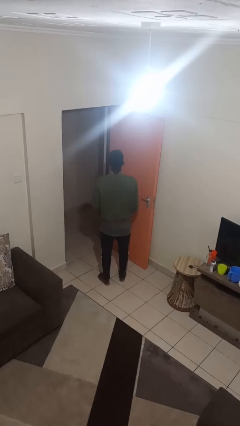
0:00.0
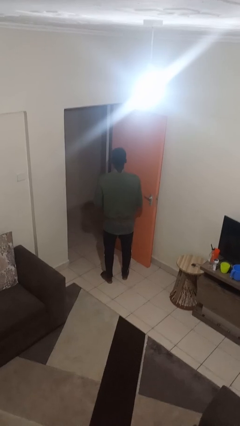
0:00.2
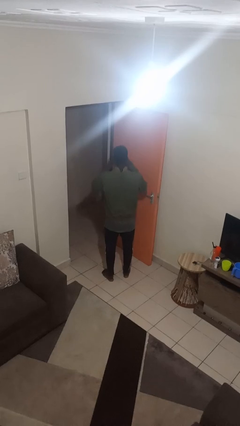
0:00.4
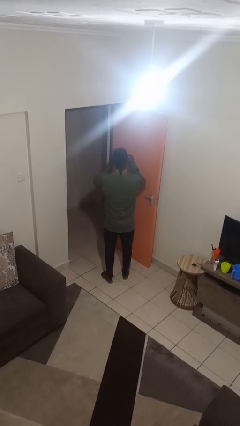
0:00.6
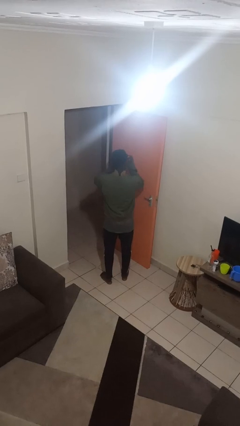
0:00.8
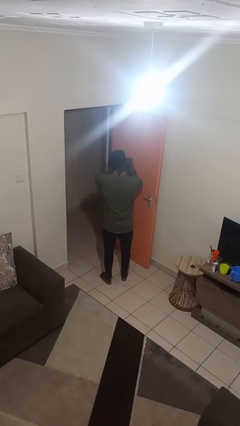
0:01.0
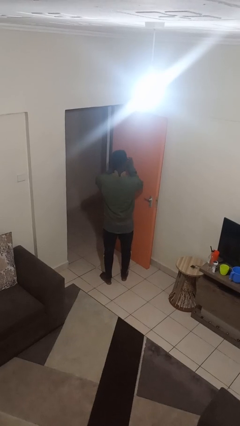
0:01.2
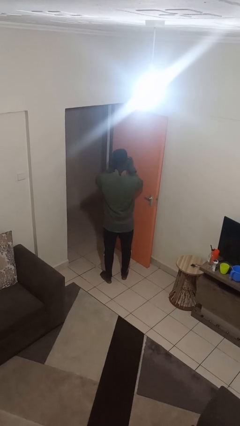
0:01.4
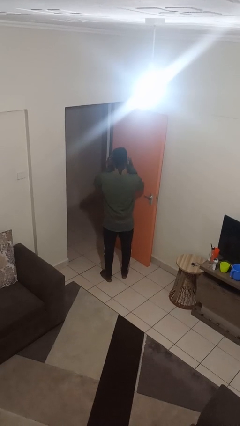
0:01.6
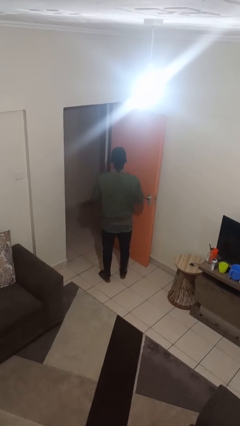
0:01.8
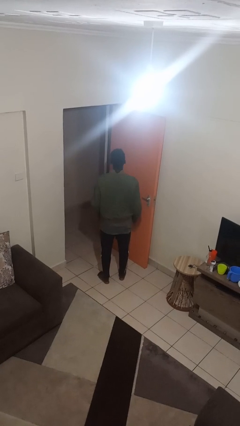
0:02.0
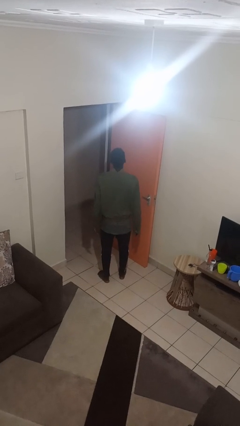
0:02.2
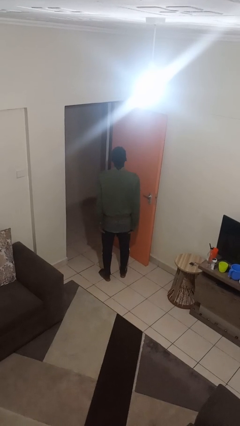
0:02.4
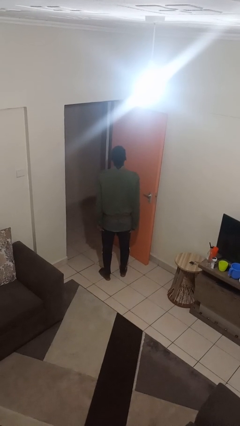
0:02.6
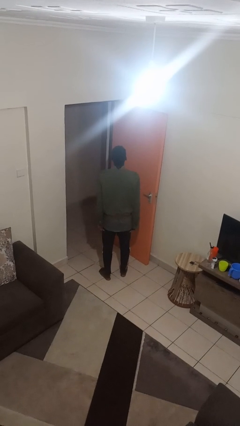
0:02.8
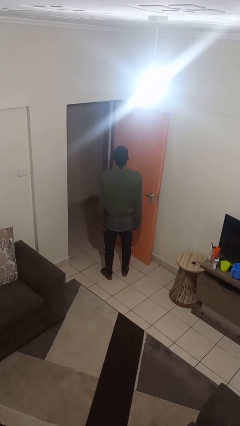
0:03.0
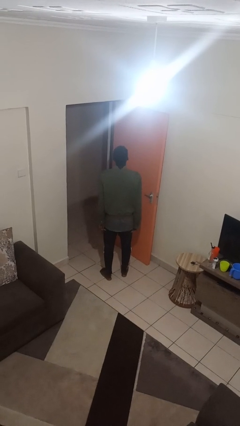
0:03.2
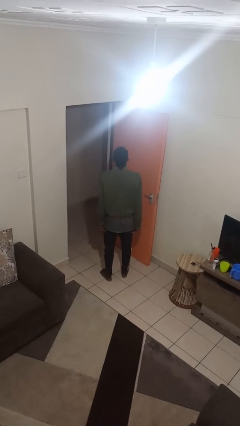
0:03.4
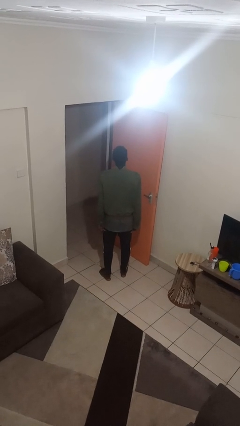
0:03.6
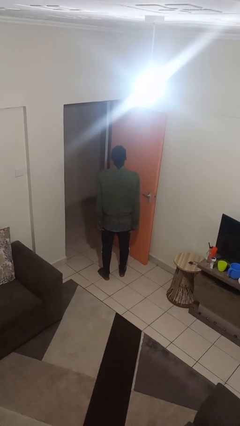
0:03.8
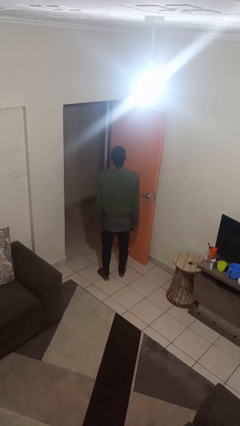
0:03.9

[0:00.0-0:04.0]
person puts on sunglasses

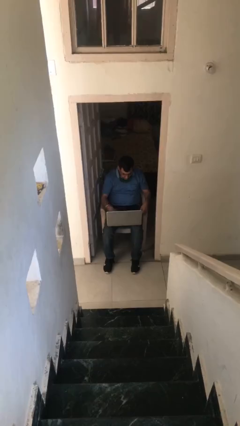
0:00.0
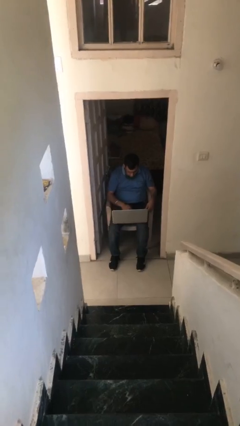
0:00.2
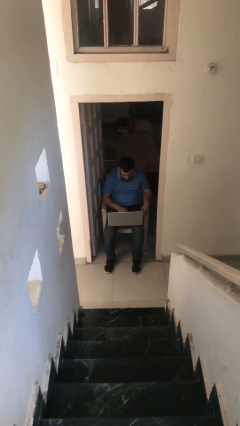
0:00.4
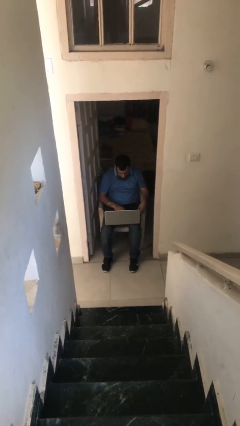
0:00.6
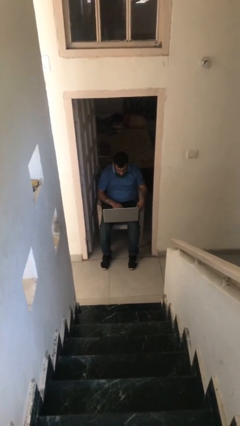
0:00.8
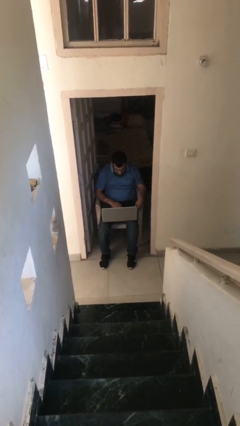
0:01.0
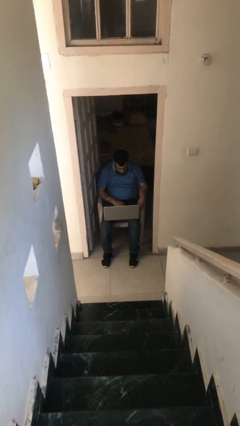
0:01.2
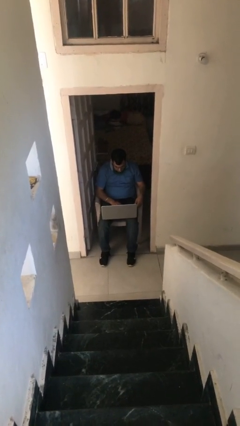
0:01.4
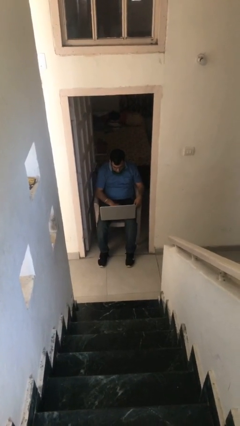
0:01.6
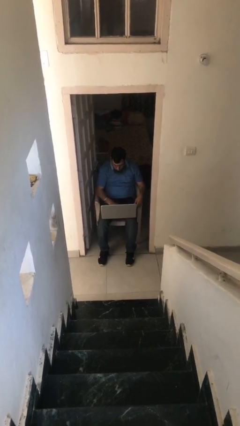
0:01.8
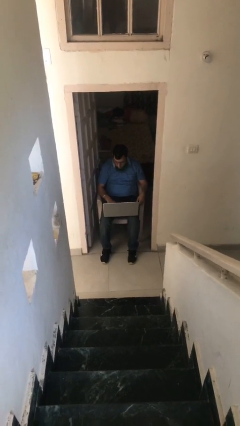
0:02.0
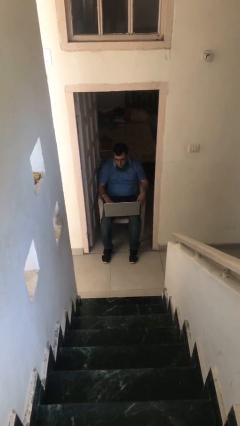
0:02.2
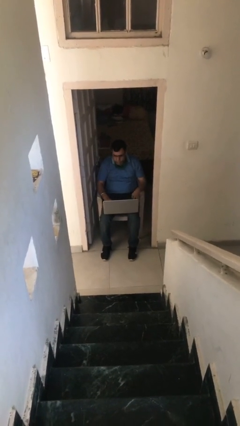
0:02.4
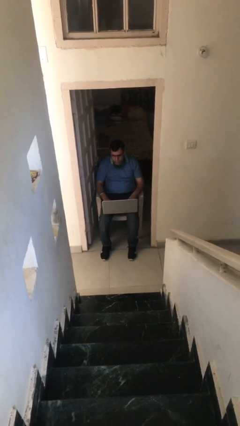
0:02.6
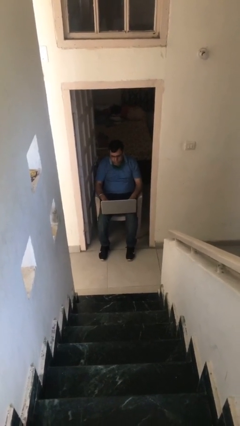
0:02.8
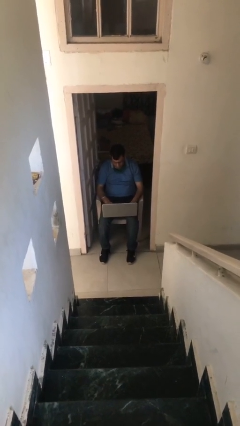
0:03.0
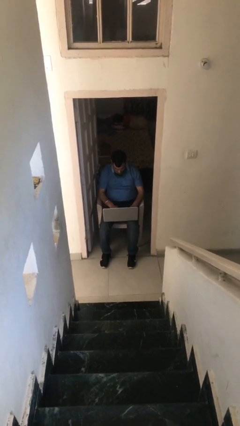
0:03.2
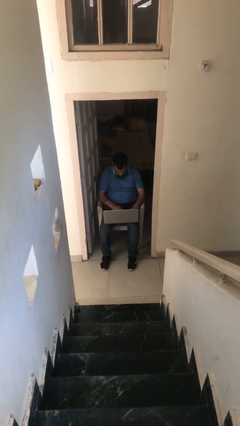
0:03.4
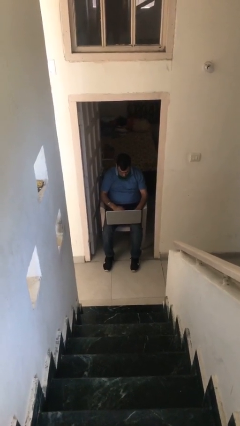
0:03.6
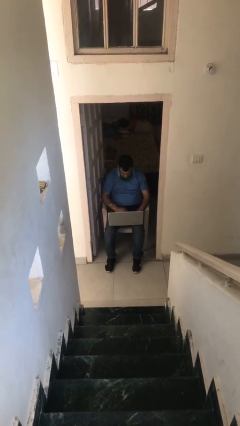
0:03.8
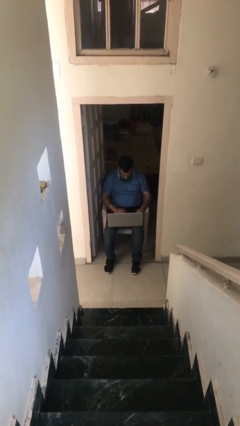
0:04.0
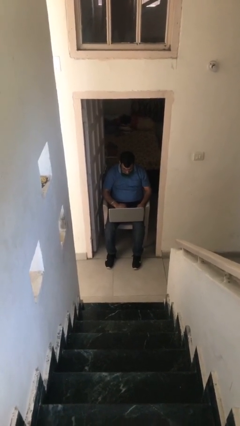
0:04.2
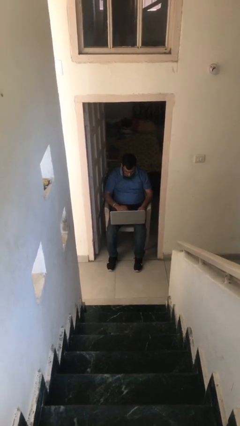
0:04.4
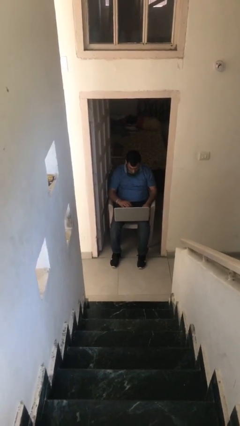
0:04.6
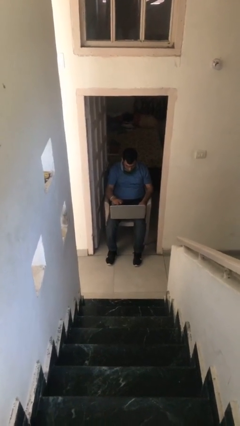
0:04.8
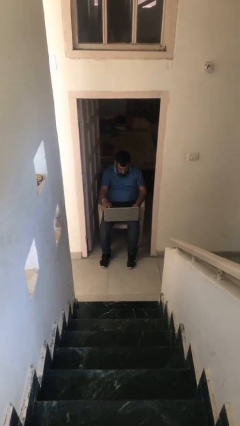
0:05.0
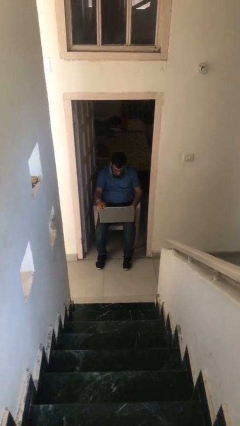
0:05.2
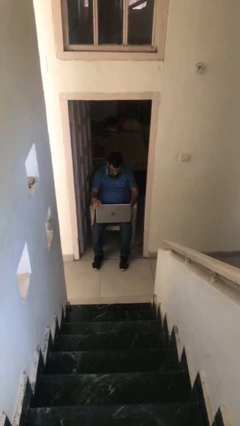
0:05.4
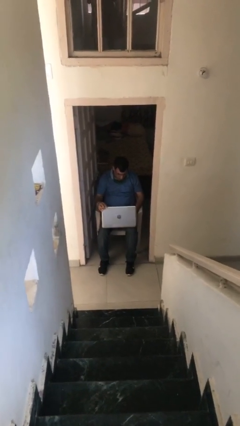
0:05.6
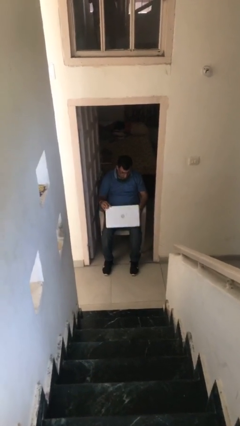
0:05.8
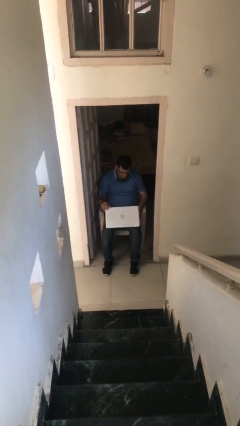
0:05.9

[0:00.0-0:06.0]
person interacts with laptop

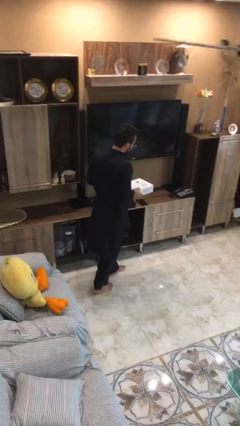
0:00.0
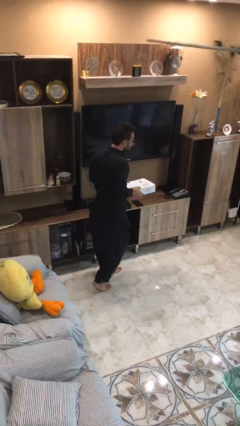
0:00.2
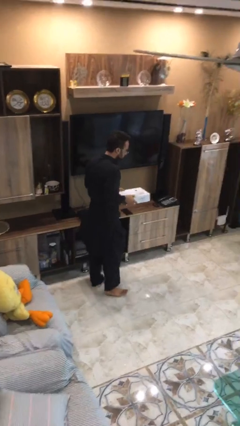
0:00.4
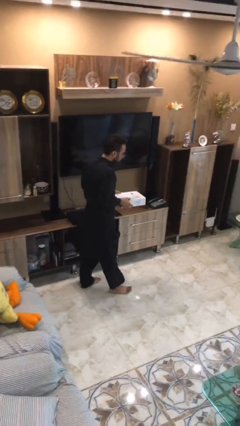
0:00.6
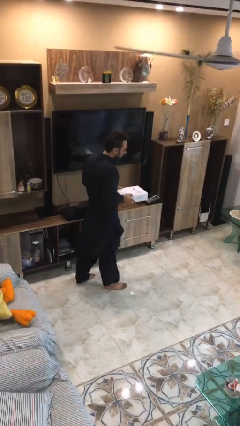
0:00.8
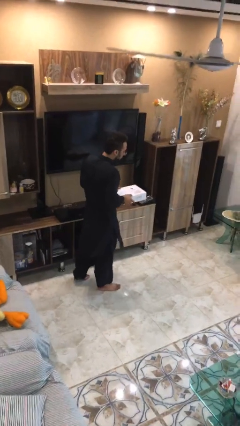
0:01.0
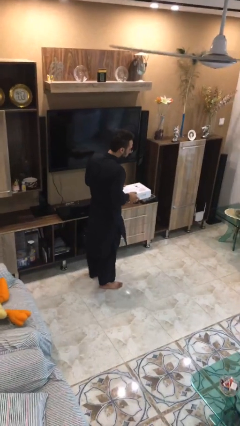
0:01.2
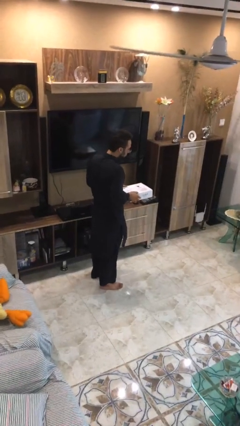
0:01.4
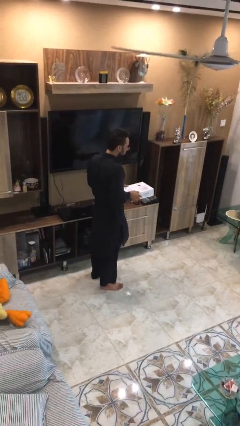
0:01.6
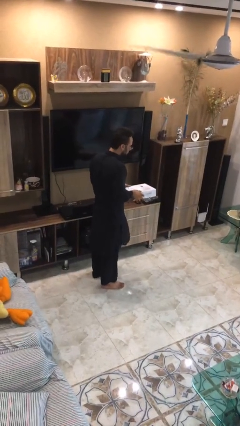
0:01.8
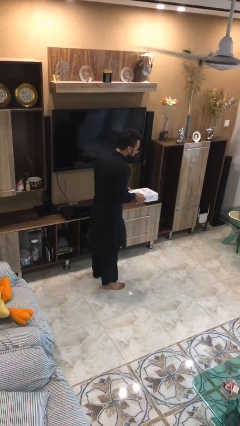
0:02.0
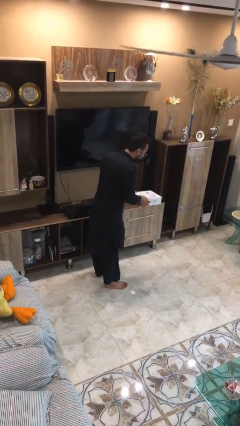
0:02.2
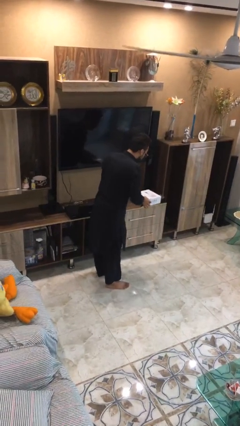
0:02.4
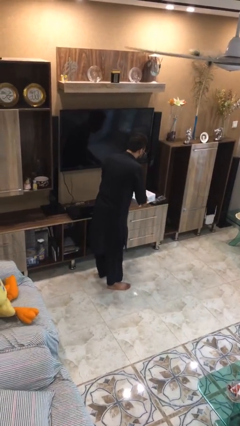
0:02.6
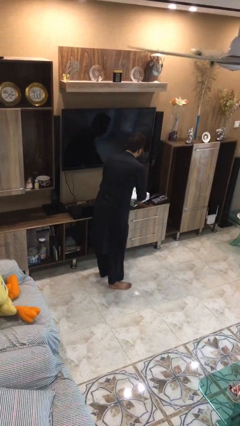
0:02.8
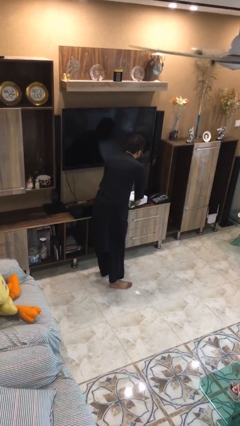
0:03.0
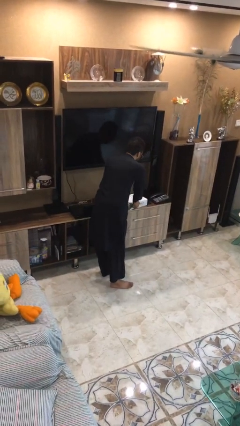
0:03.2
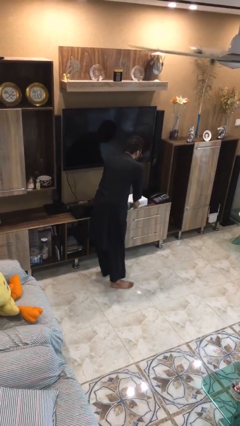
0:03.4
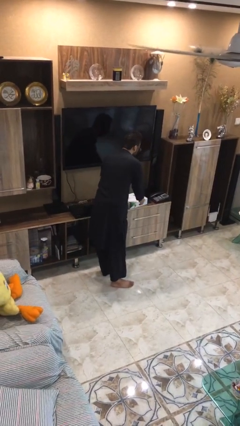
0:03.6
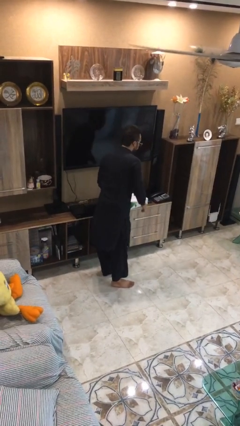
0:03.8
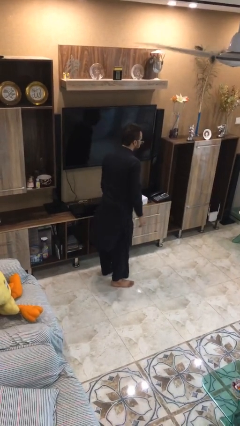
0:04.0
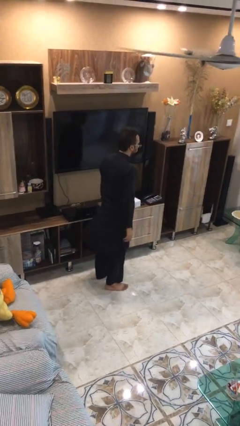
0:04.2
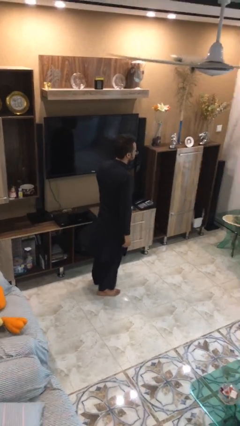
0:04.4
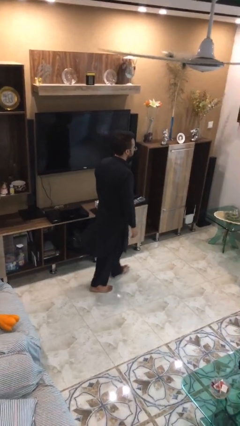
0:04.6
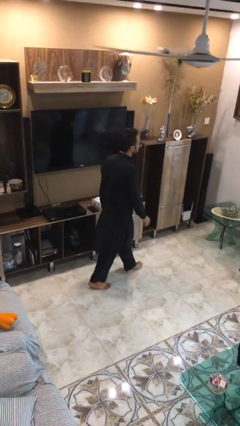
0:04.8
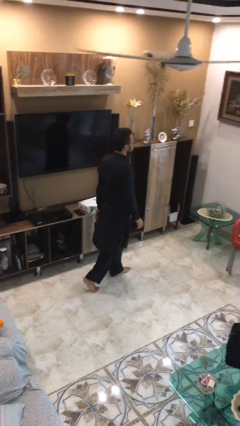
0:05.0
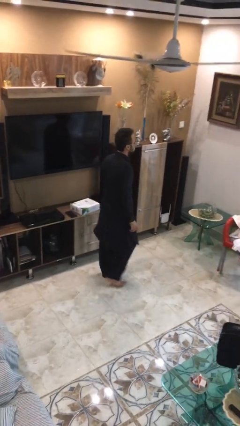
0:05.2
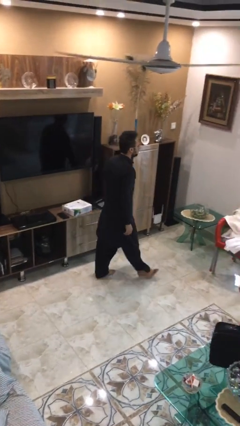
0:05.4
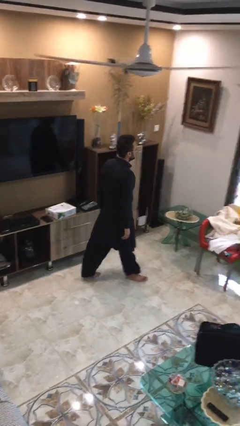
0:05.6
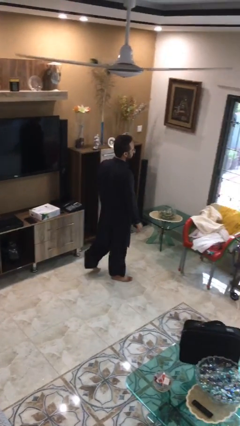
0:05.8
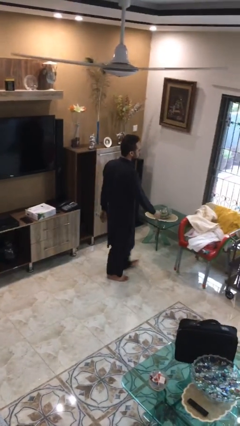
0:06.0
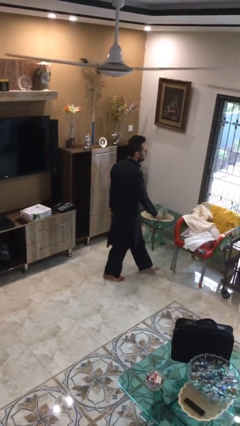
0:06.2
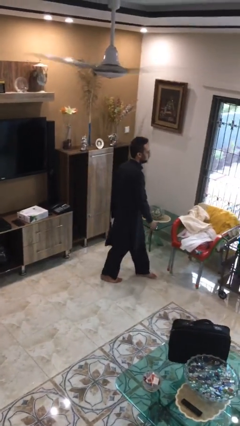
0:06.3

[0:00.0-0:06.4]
person puts down object on table

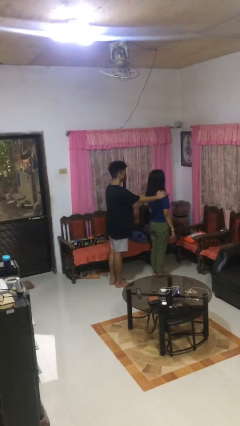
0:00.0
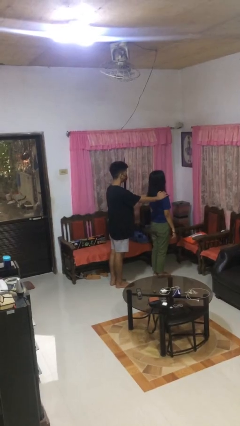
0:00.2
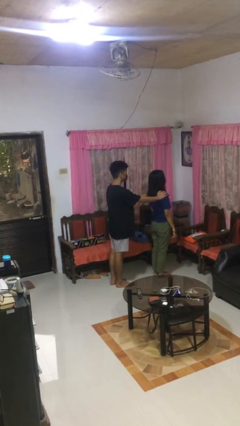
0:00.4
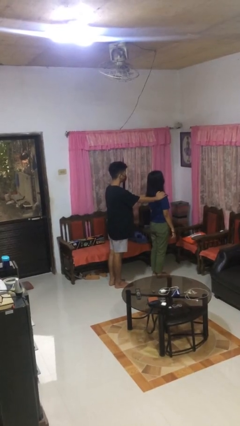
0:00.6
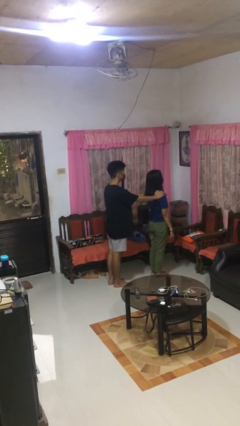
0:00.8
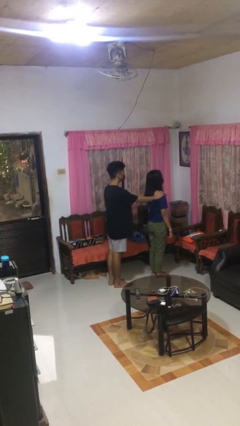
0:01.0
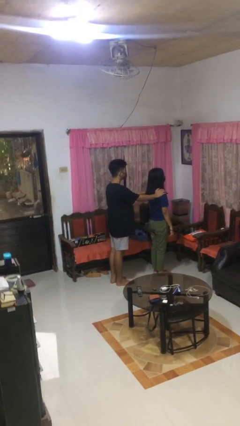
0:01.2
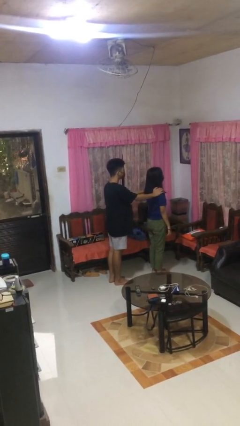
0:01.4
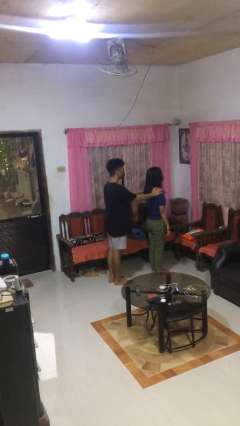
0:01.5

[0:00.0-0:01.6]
person grabs person by shoulder

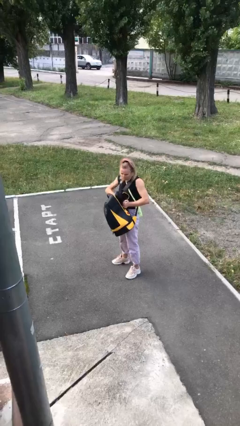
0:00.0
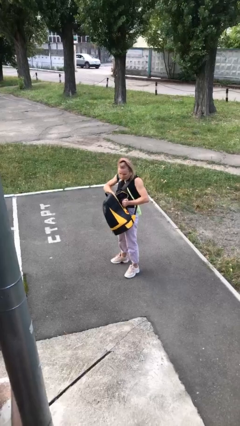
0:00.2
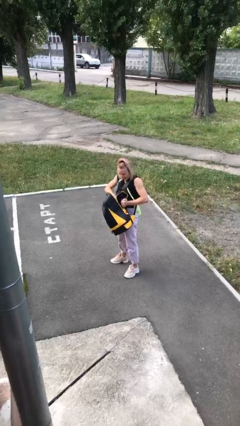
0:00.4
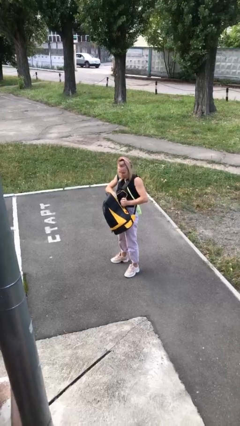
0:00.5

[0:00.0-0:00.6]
person puts object into backpack
